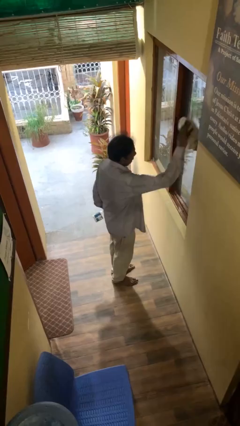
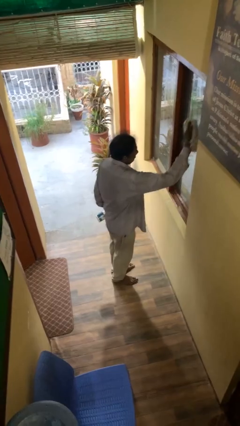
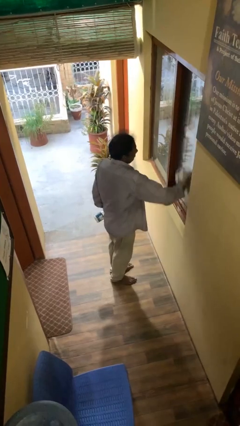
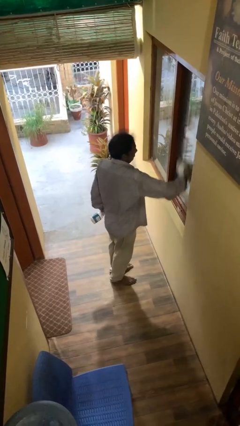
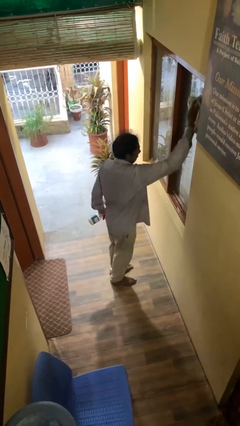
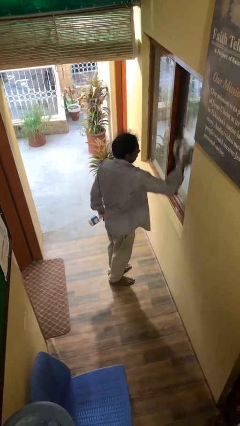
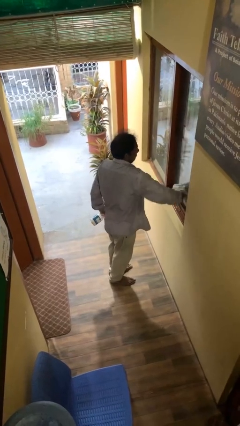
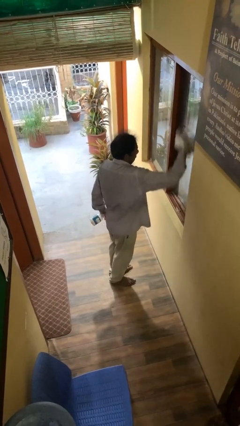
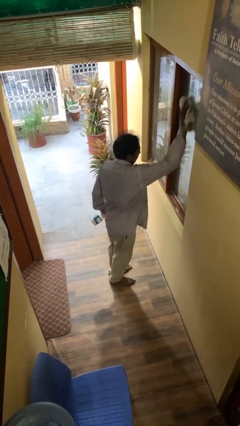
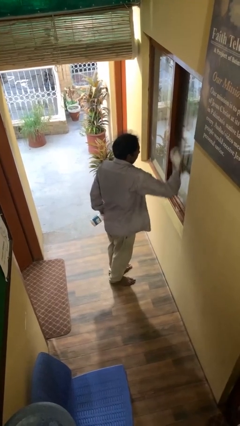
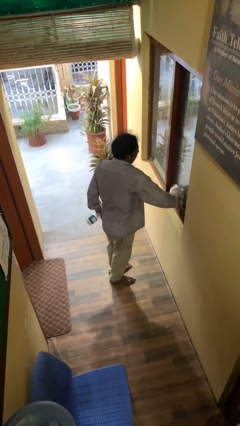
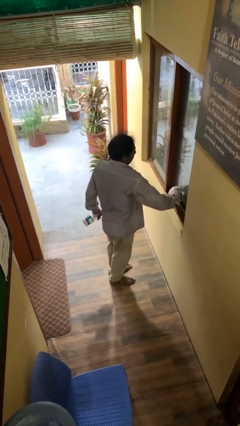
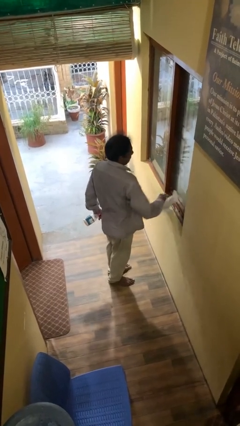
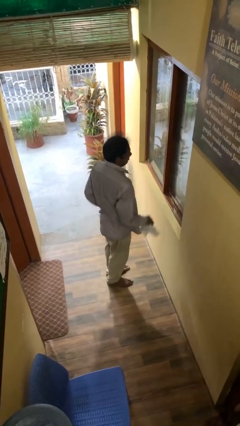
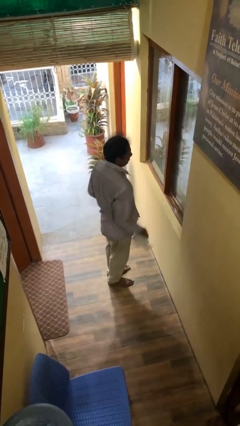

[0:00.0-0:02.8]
person washes window

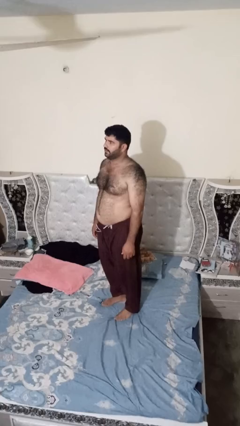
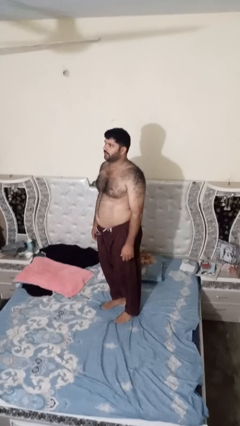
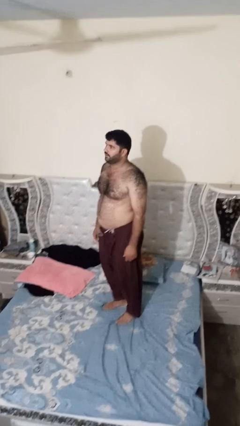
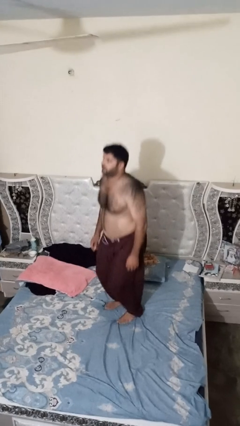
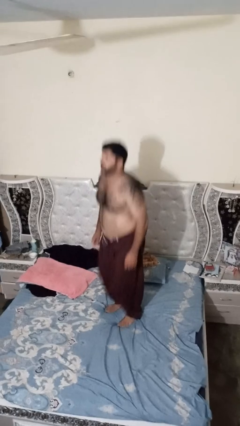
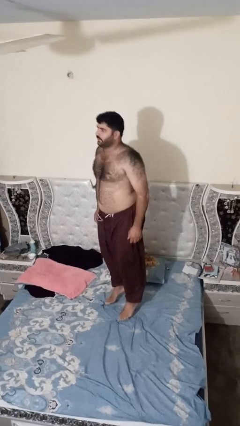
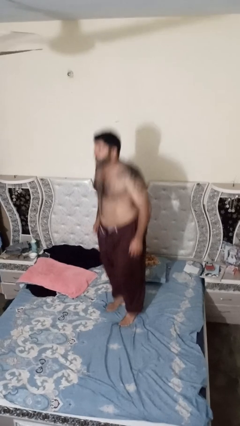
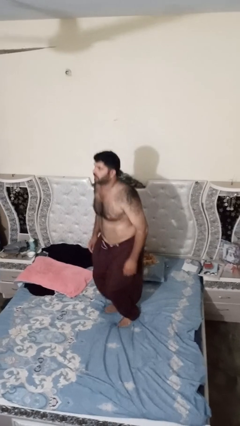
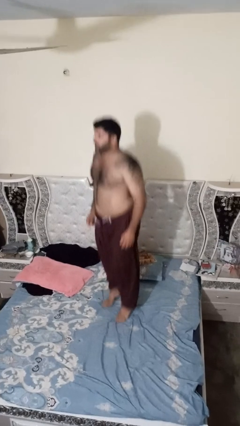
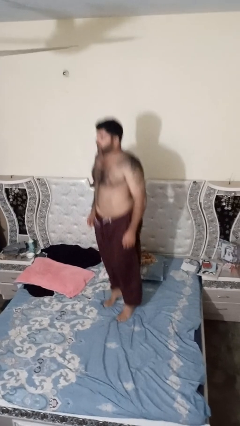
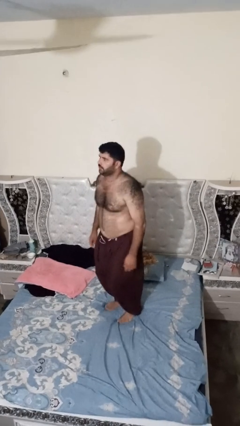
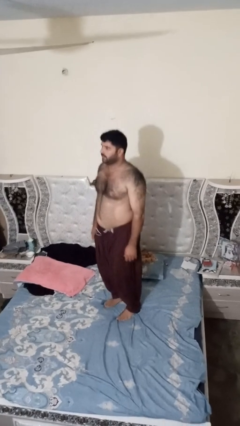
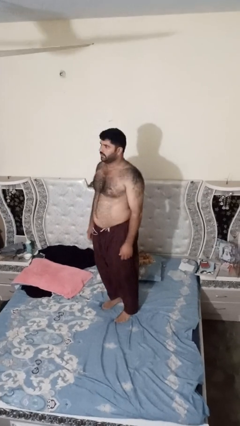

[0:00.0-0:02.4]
person jumps on bed

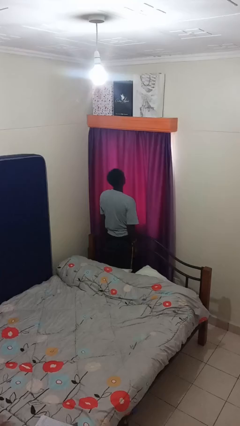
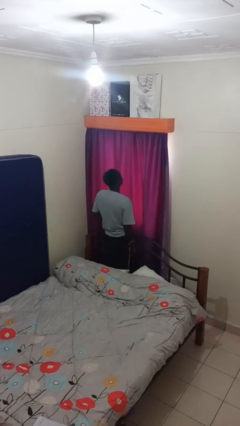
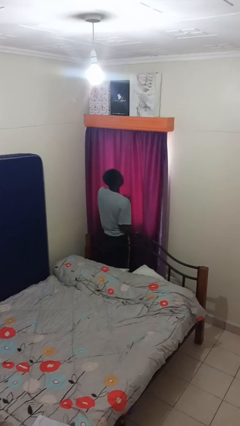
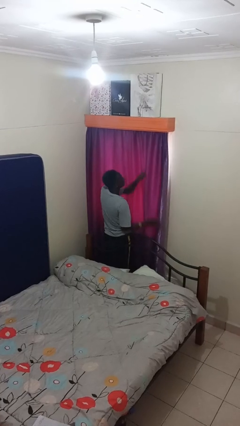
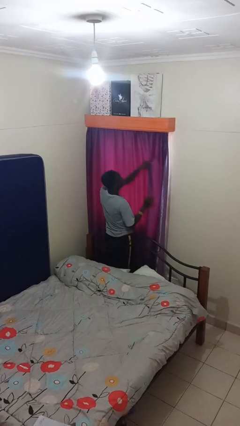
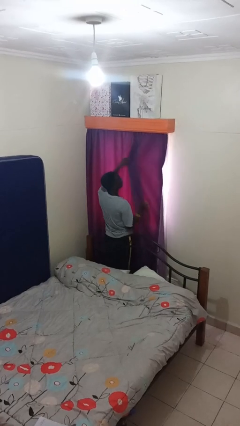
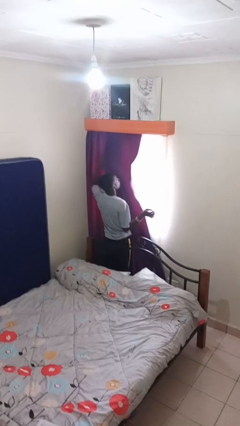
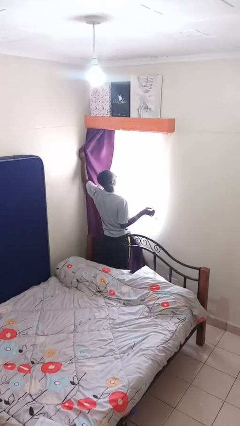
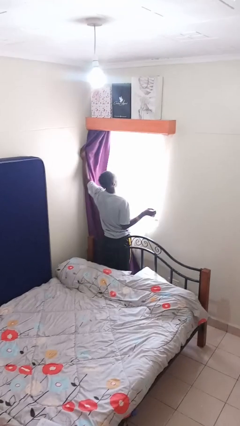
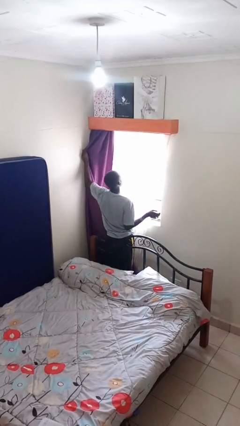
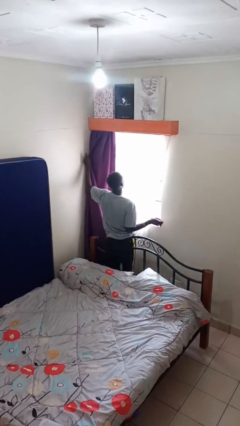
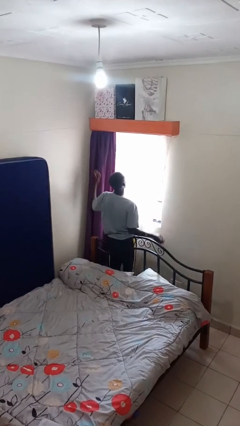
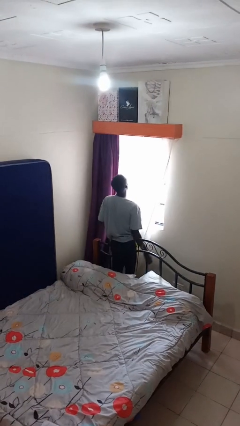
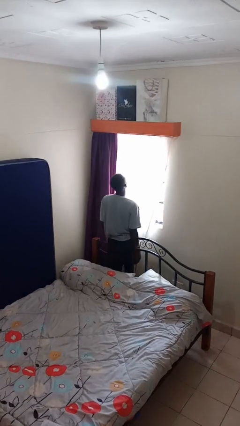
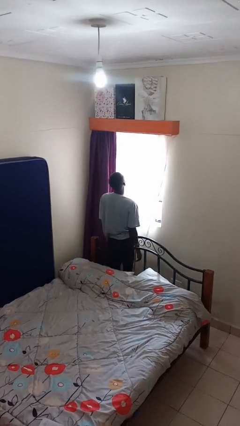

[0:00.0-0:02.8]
person opens curtains

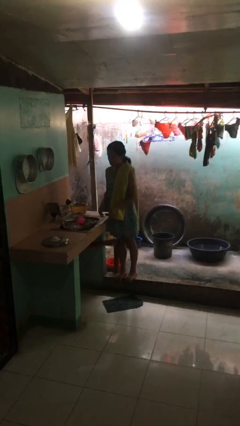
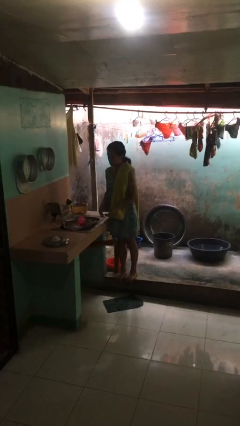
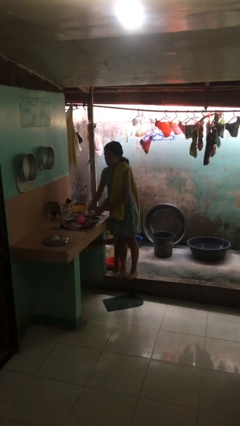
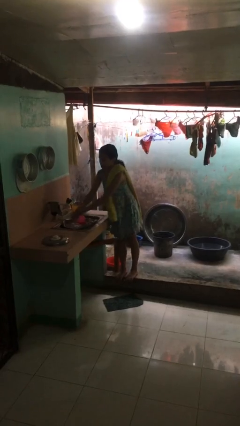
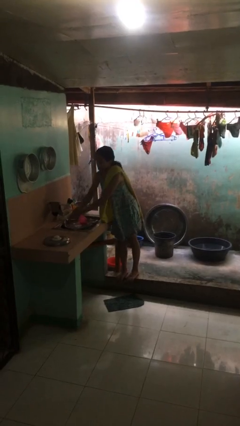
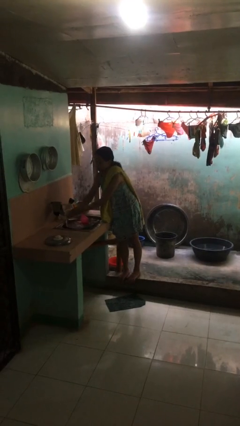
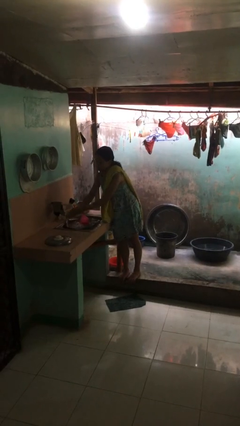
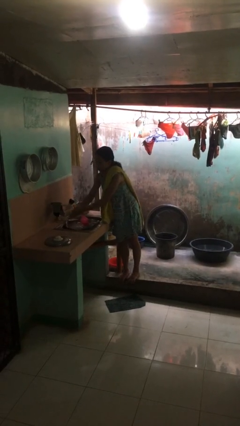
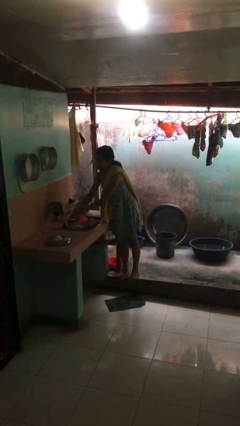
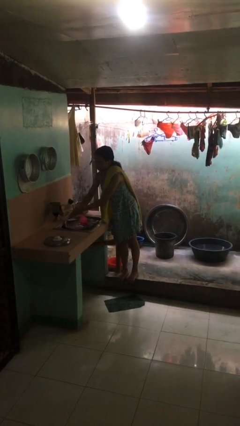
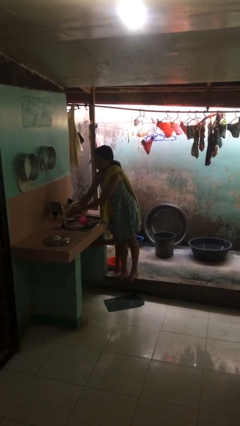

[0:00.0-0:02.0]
person washes hands

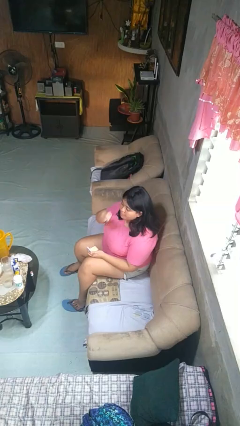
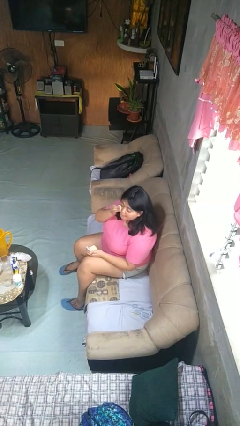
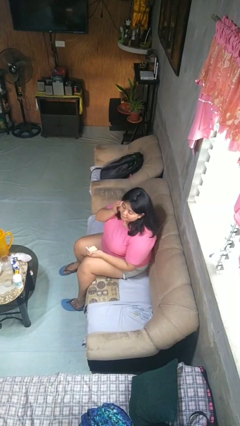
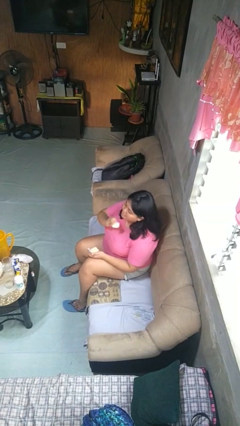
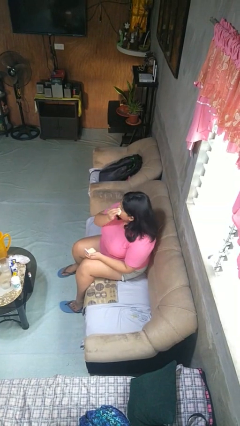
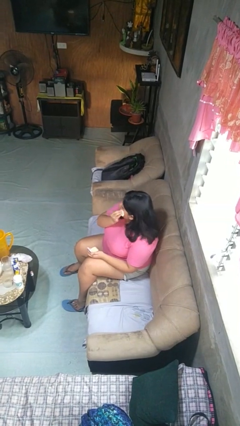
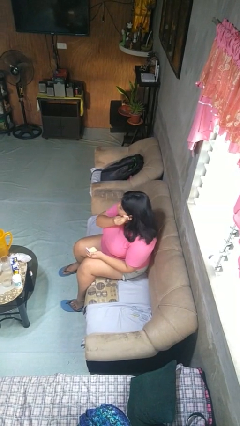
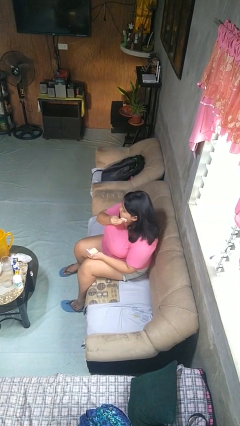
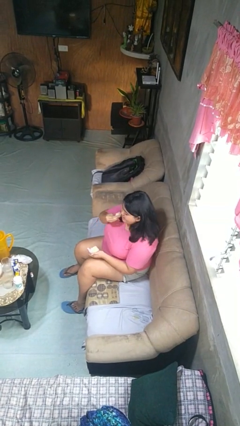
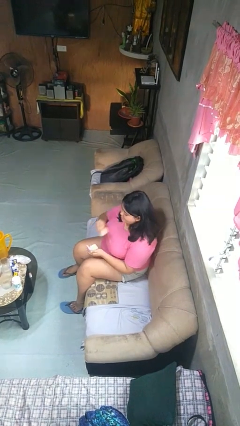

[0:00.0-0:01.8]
person applies foundation makeup

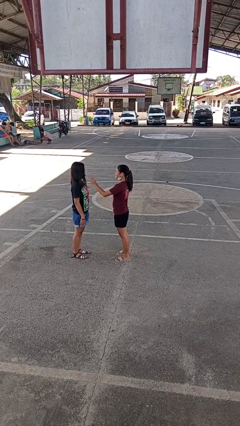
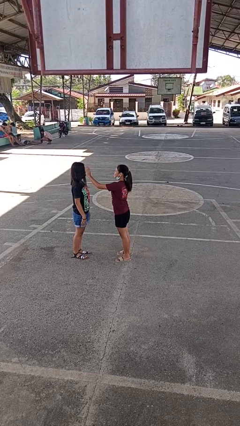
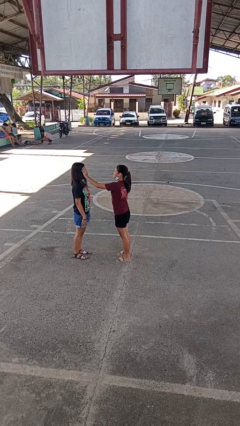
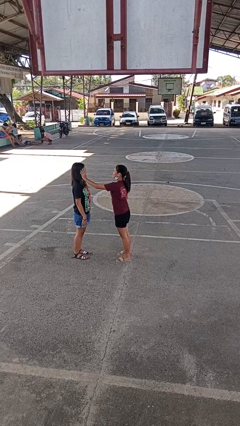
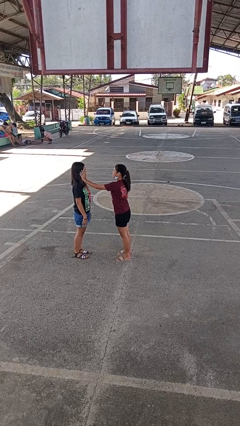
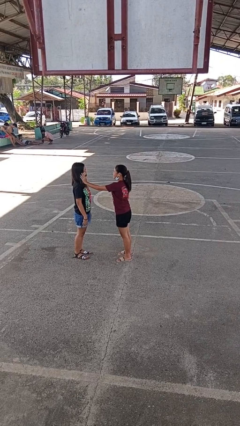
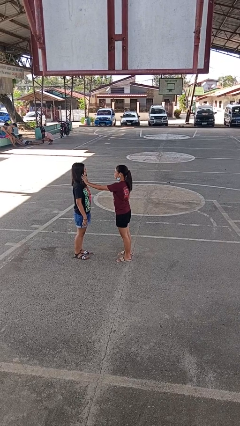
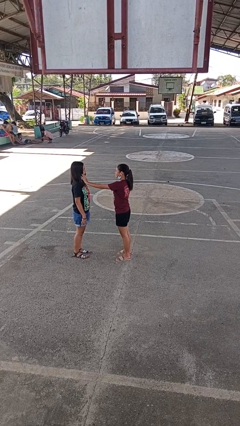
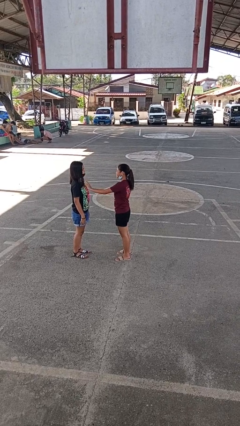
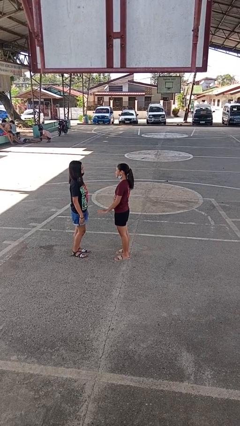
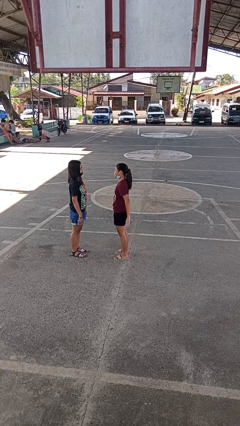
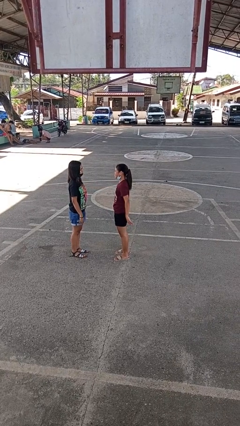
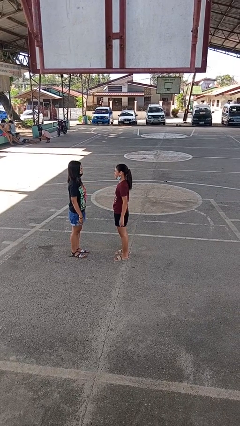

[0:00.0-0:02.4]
person touches face of person

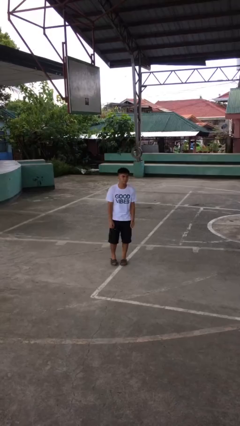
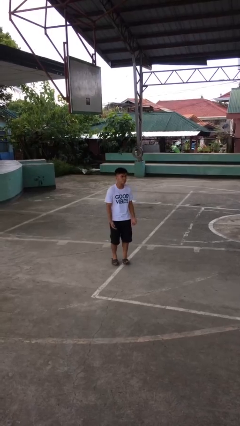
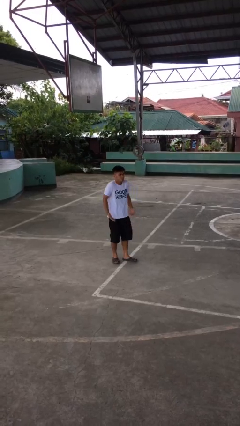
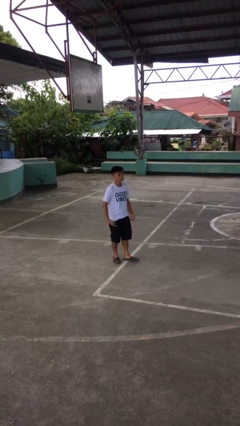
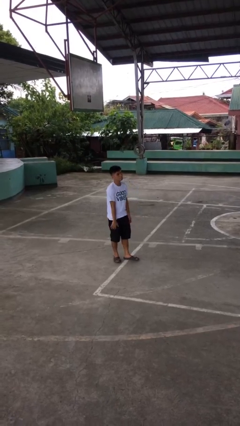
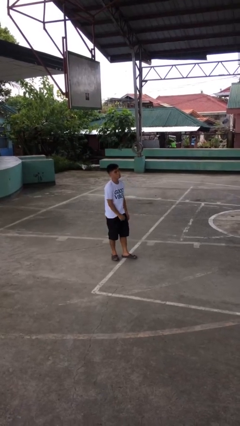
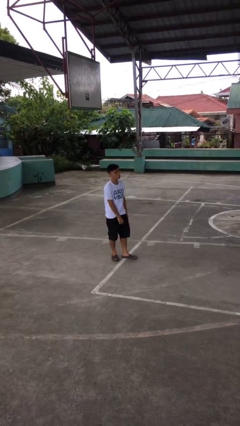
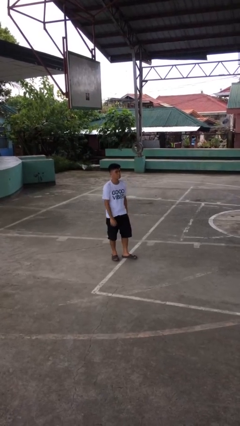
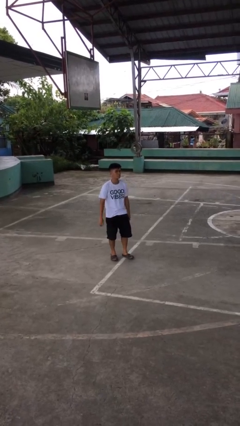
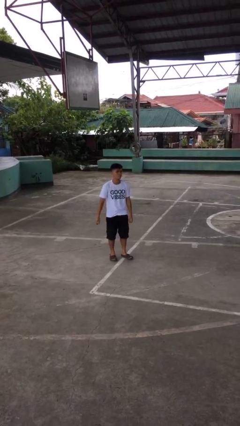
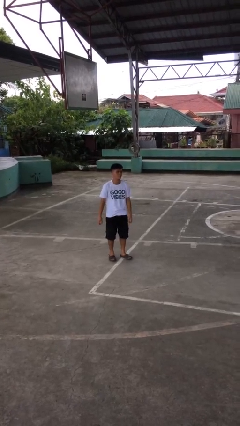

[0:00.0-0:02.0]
person shrugs

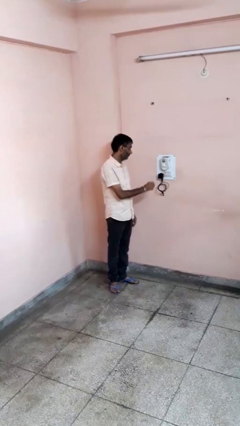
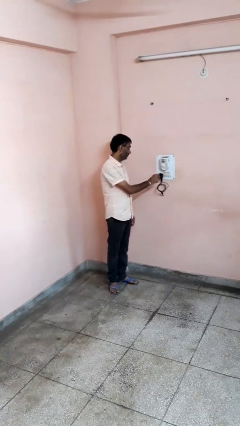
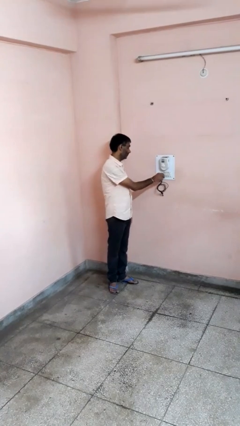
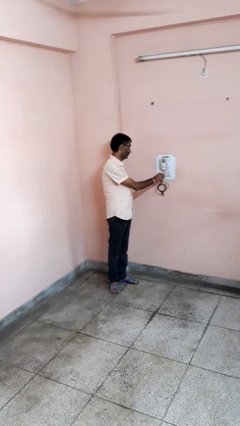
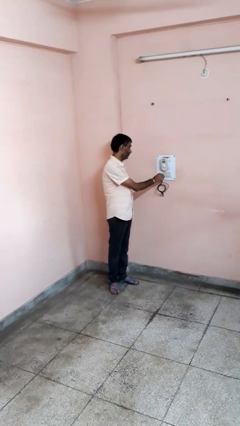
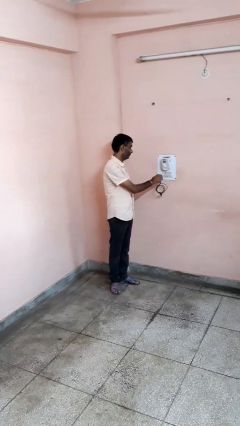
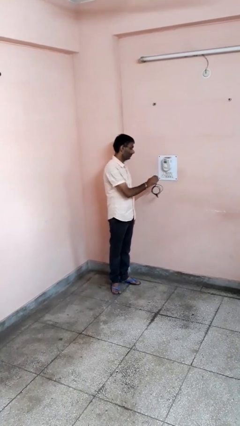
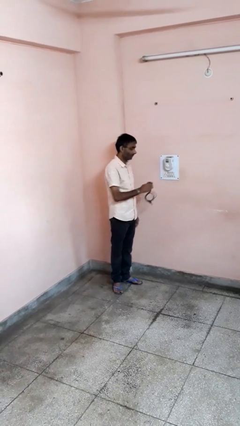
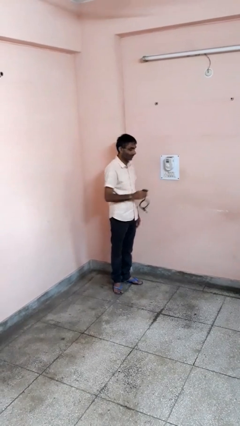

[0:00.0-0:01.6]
person unplugs from electrical socket
